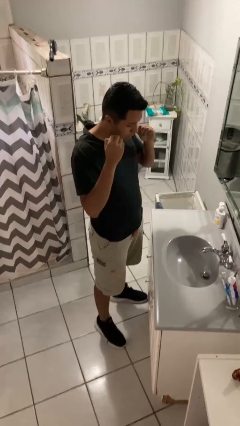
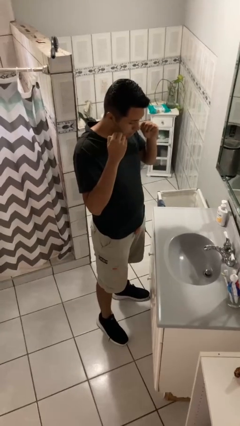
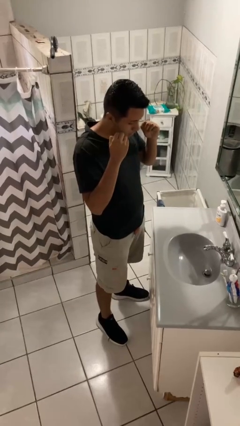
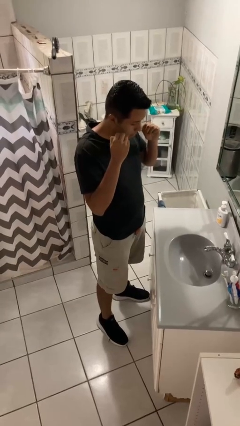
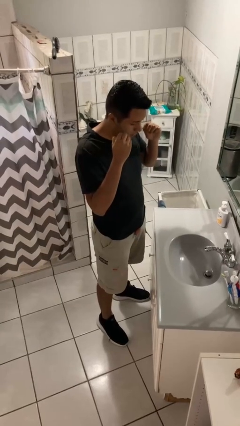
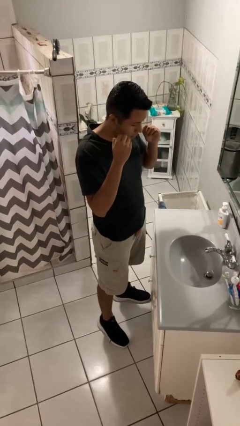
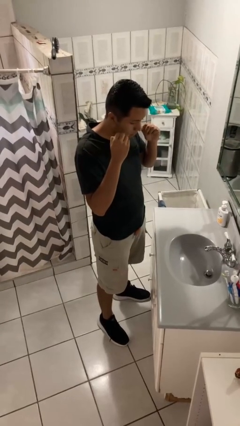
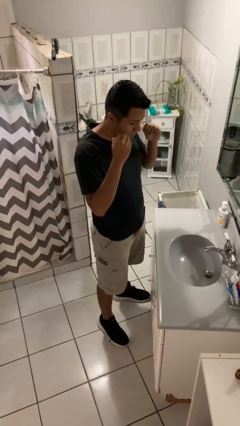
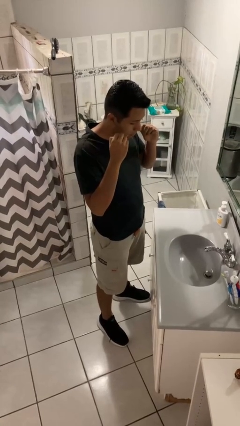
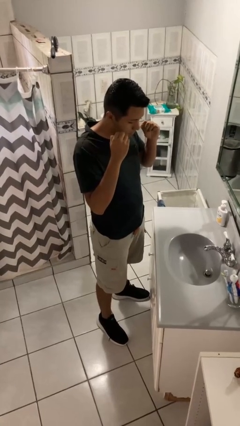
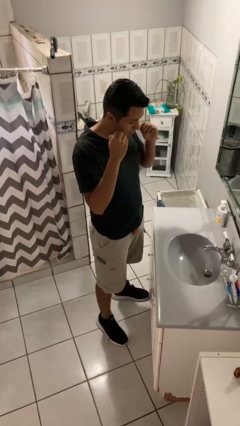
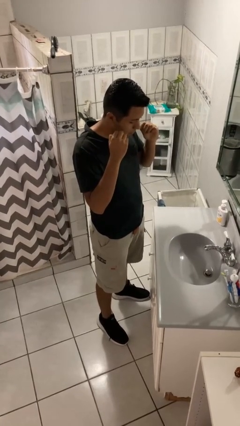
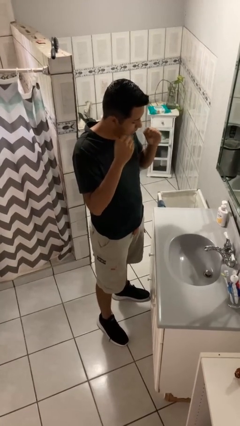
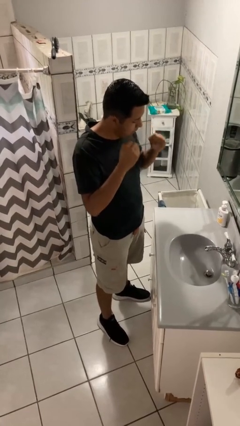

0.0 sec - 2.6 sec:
person flosses

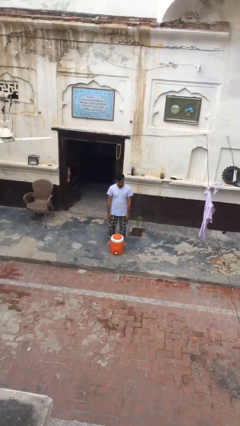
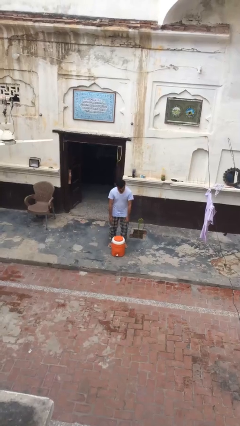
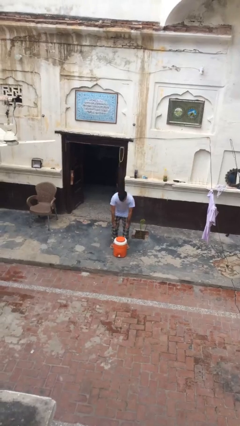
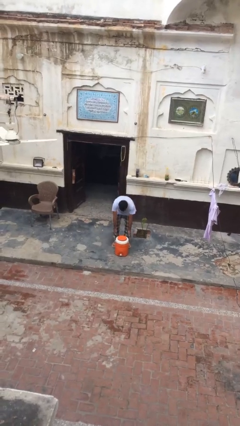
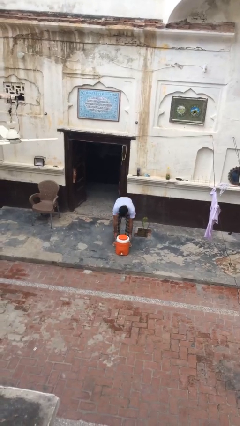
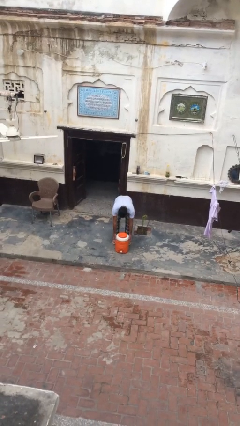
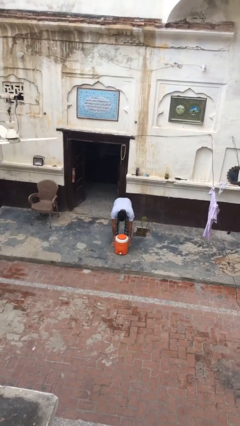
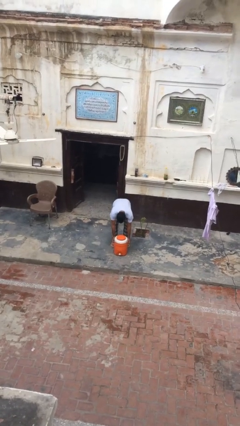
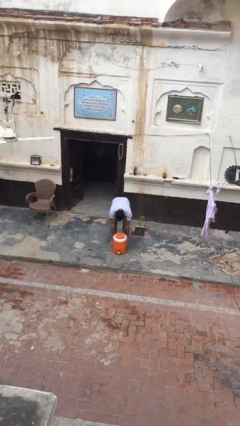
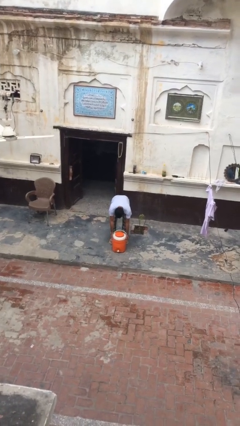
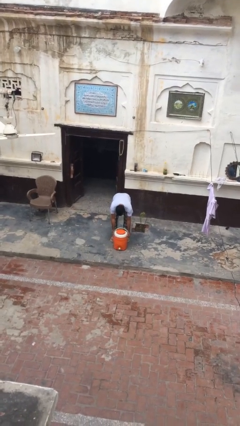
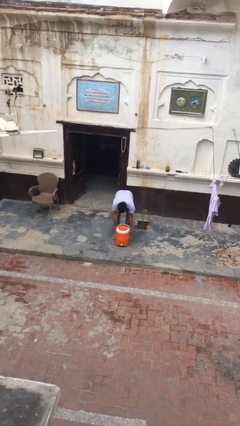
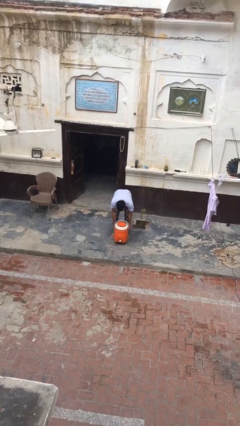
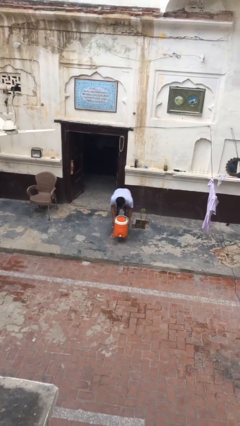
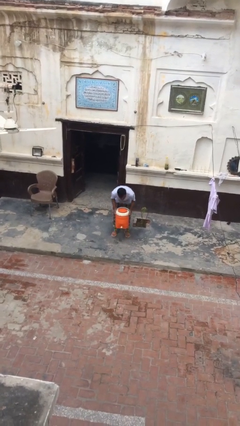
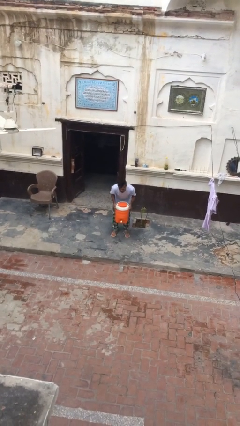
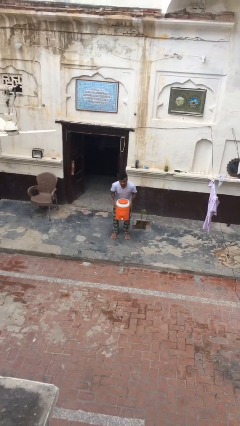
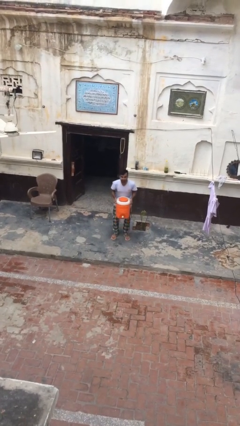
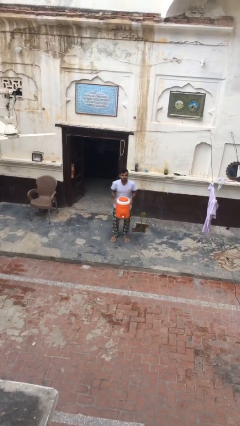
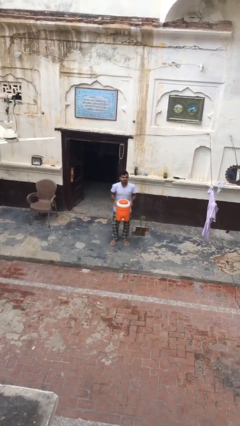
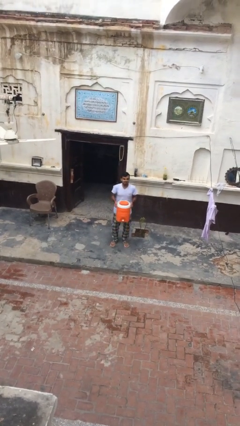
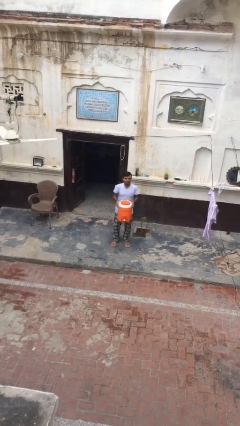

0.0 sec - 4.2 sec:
person picks up object from floor

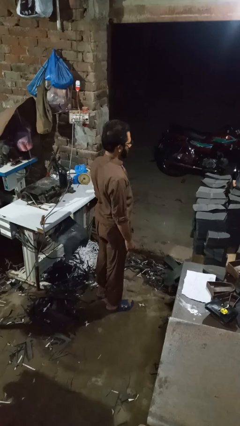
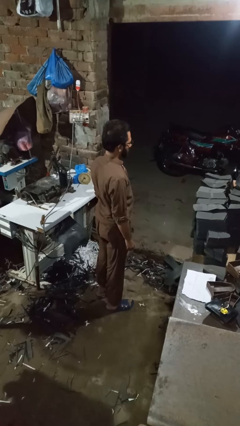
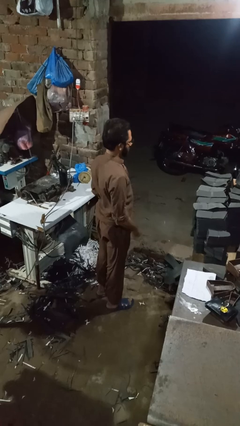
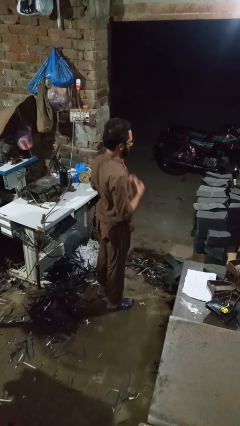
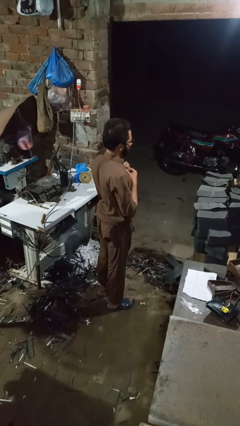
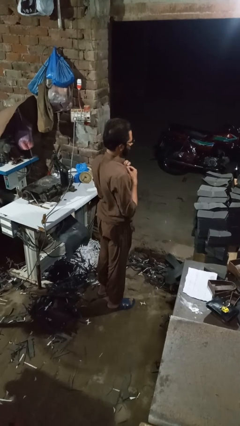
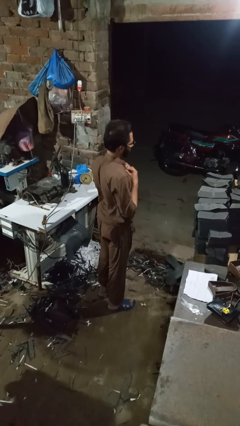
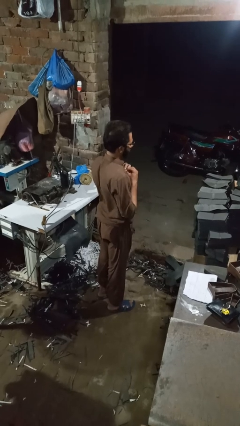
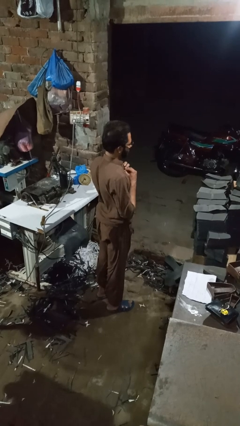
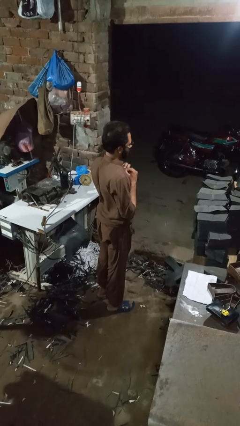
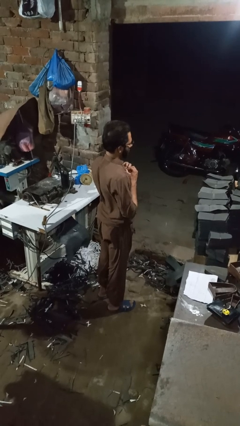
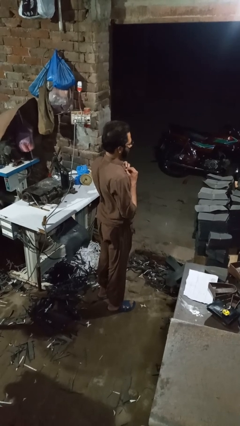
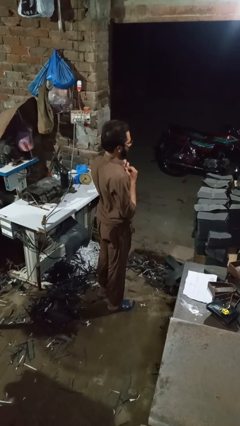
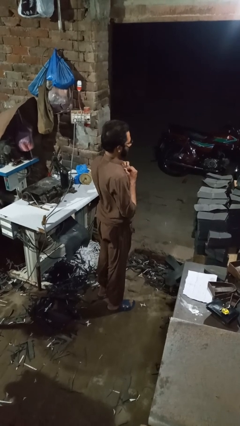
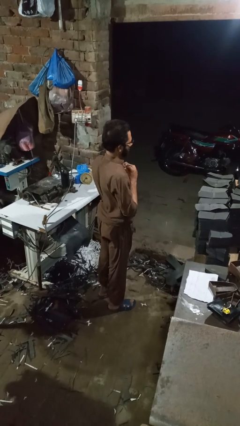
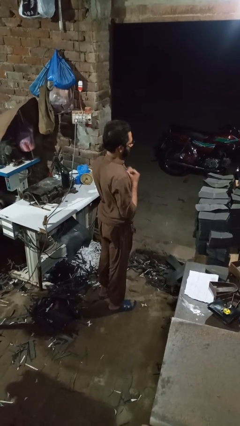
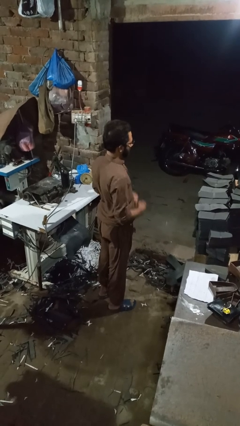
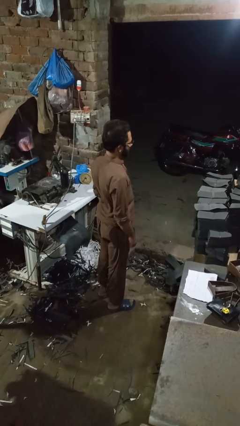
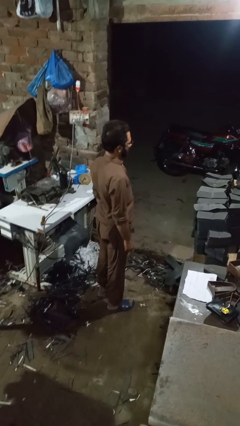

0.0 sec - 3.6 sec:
person buttons shirt

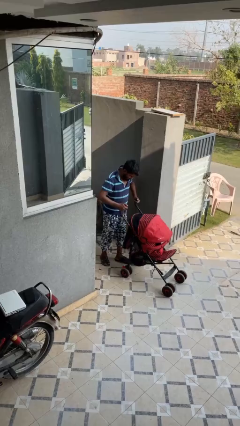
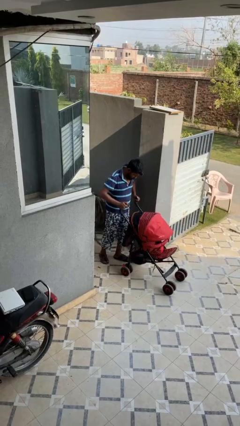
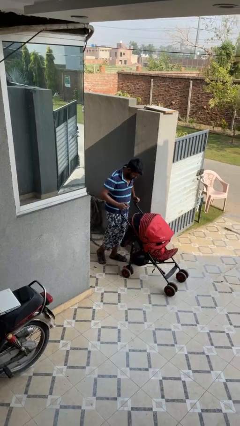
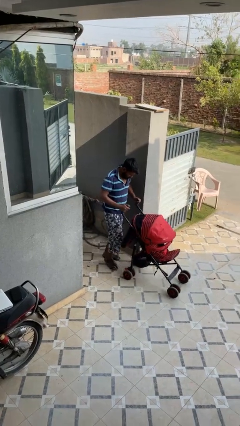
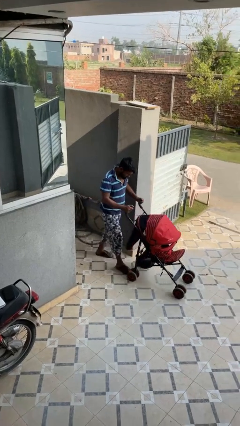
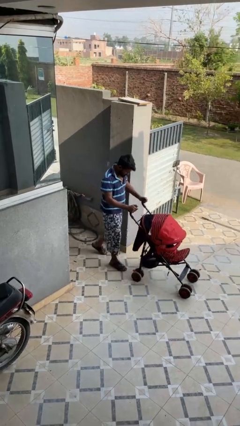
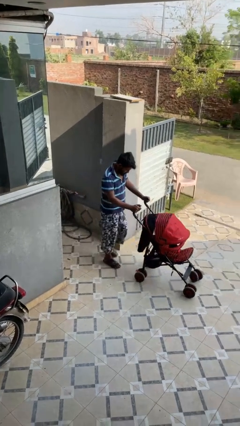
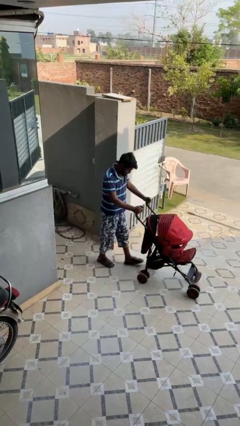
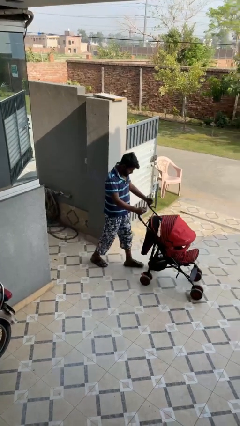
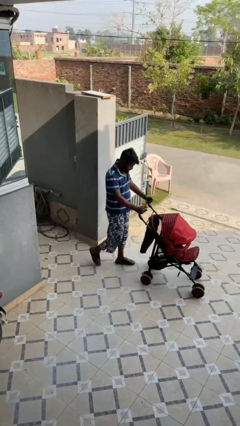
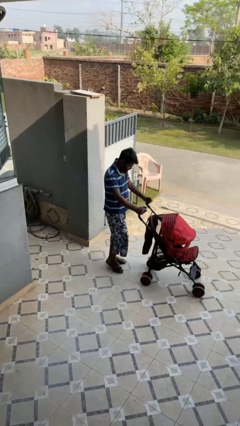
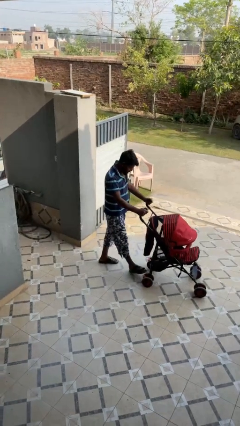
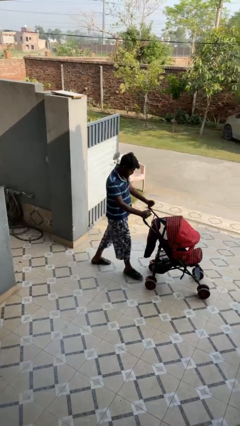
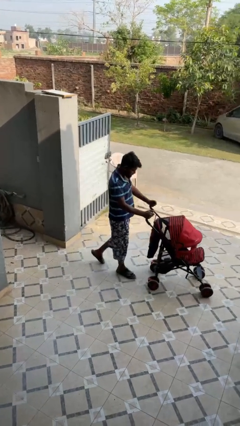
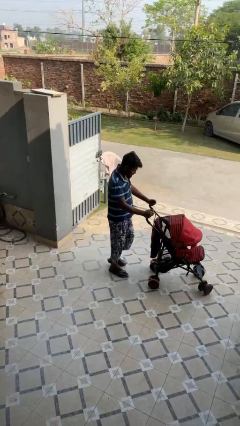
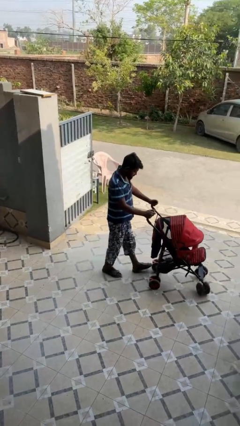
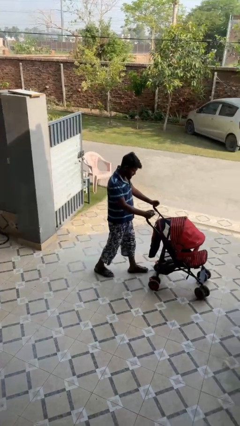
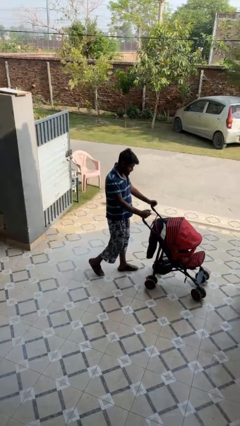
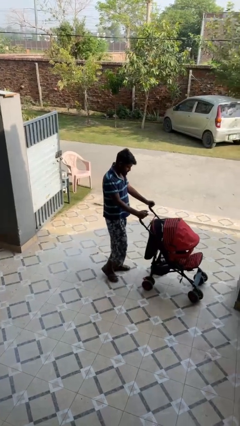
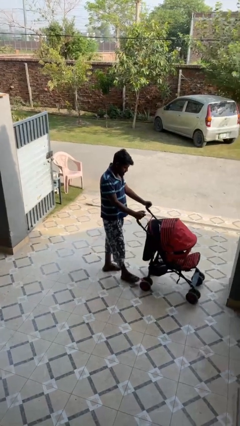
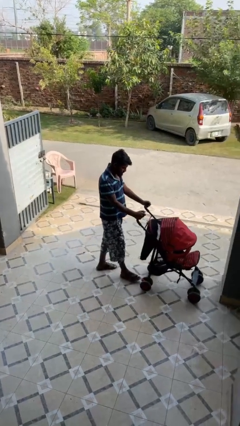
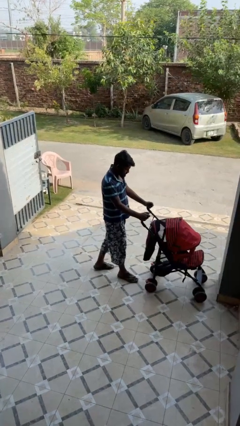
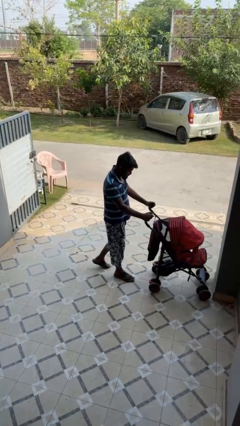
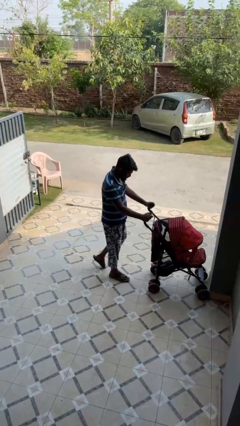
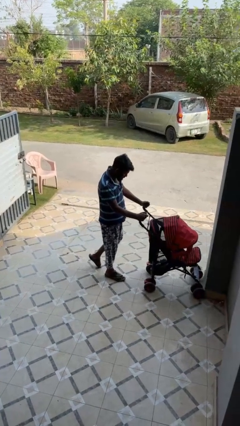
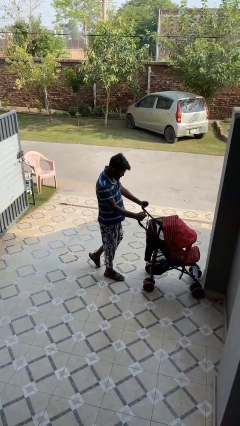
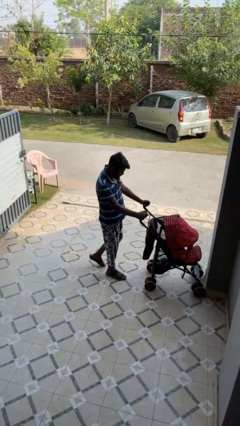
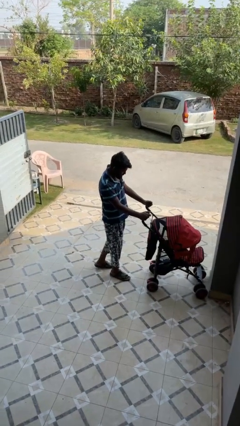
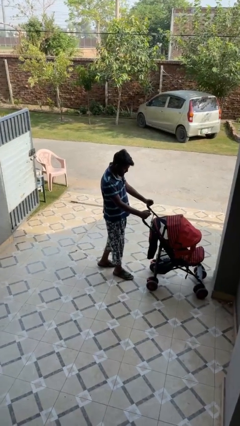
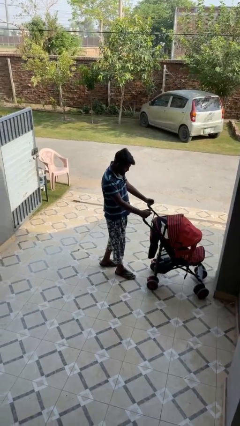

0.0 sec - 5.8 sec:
person pushes wheeled cart

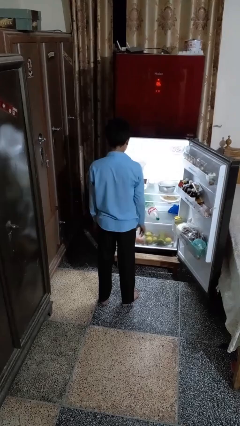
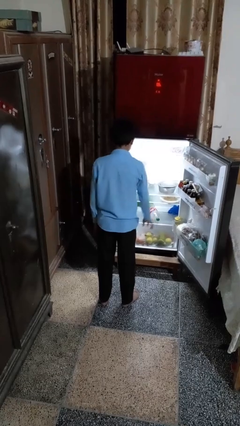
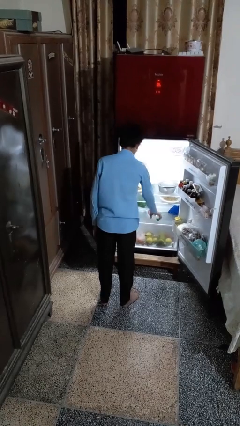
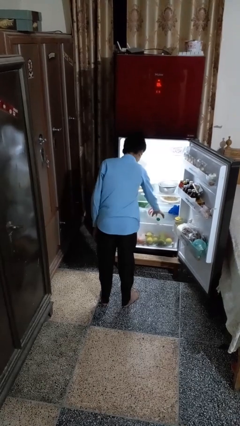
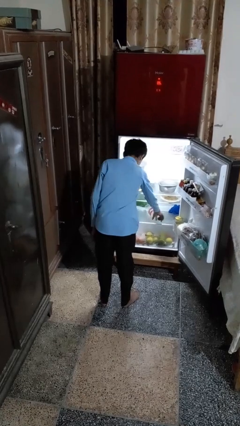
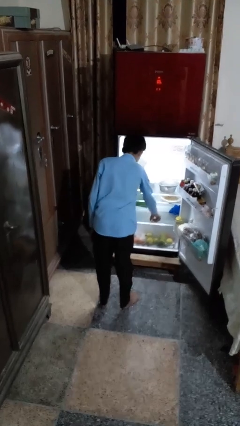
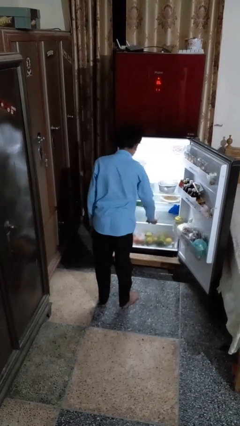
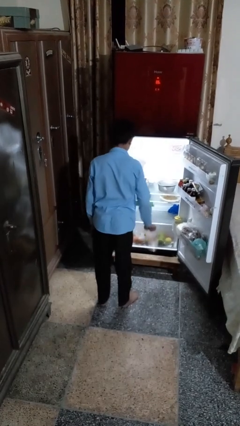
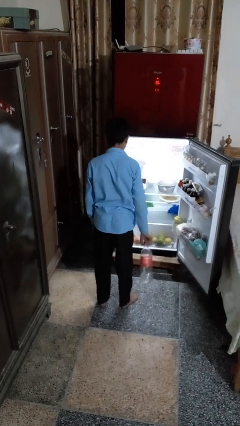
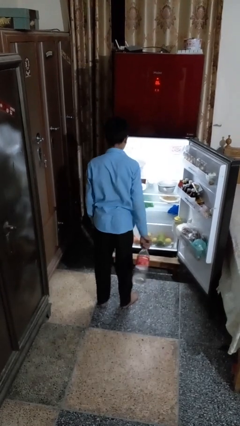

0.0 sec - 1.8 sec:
person takes object from refrigerator
